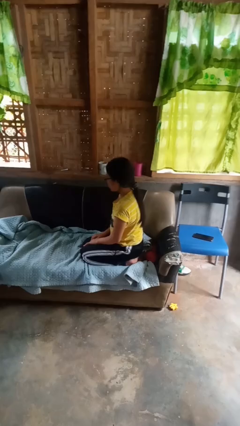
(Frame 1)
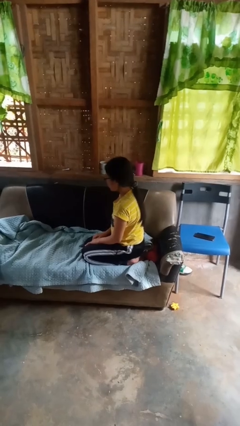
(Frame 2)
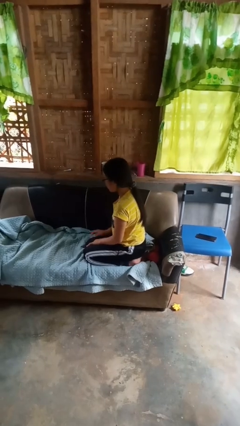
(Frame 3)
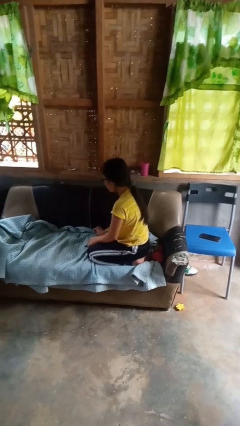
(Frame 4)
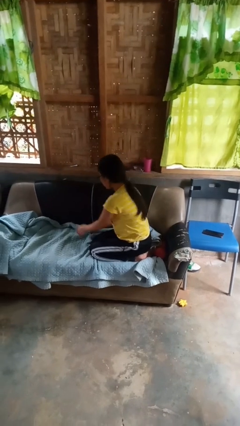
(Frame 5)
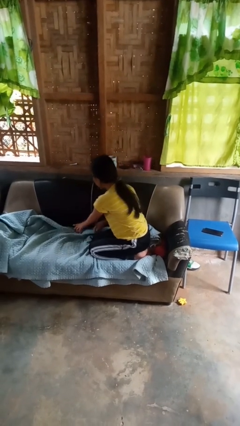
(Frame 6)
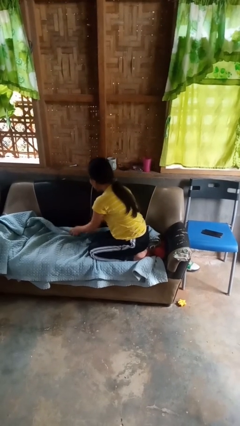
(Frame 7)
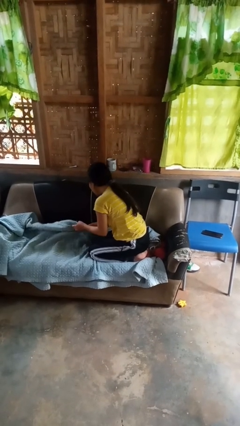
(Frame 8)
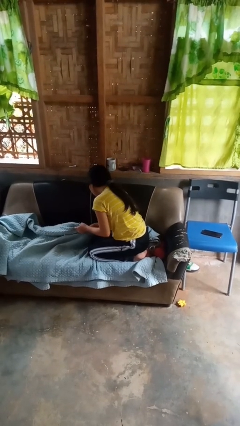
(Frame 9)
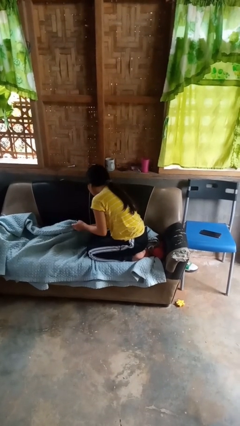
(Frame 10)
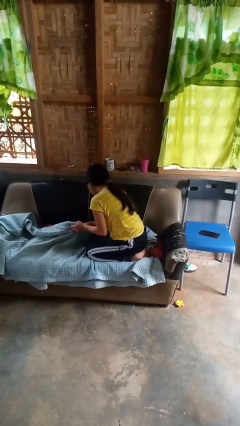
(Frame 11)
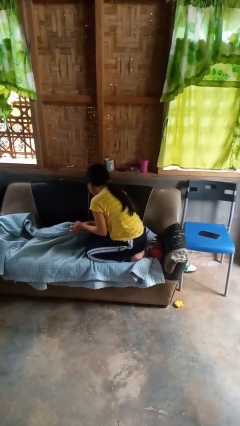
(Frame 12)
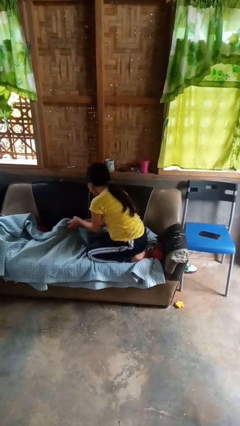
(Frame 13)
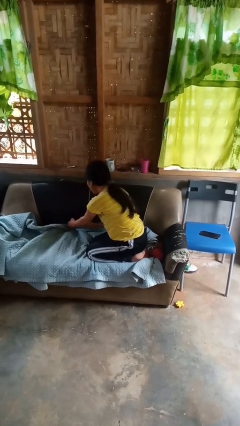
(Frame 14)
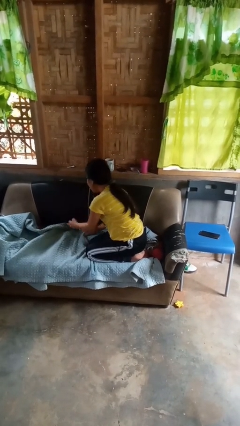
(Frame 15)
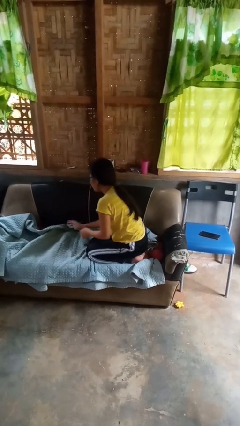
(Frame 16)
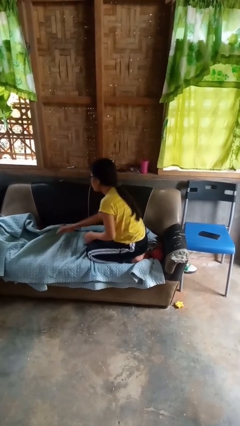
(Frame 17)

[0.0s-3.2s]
person searches in couch

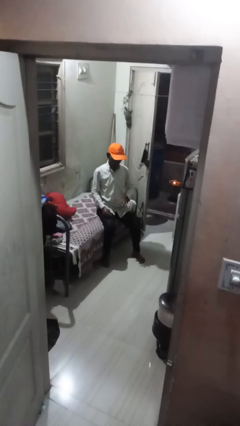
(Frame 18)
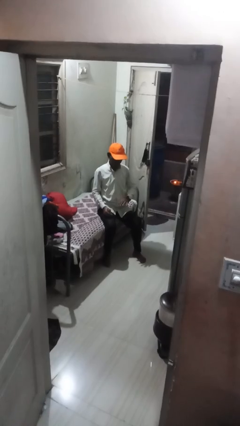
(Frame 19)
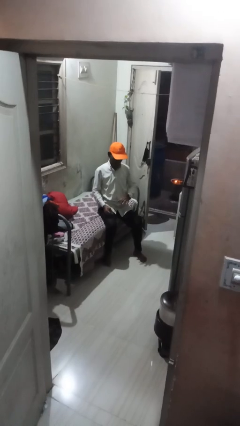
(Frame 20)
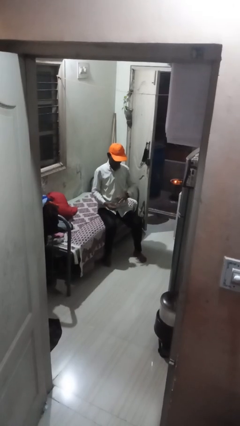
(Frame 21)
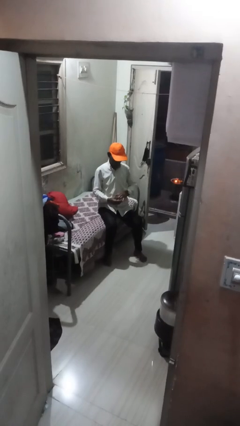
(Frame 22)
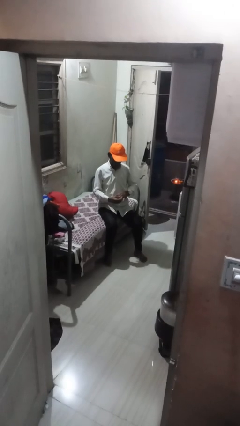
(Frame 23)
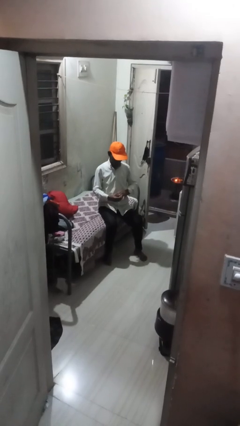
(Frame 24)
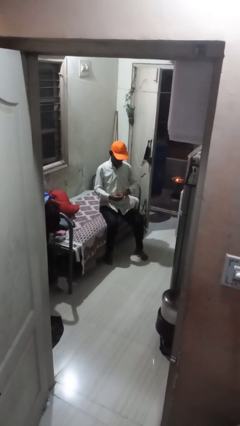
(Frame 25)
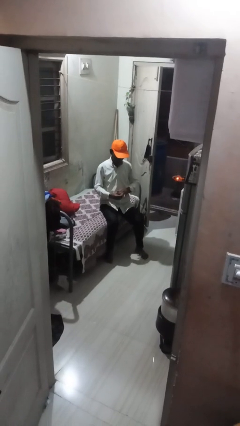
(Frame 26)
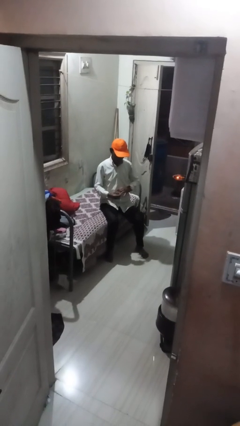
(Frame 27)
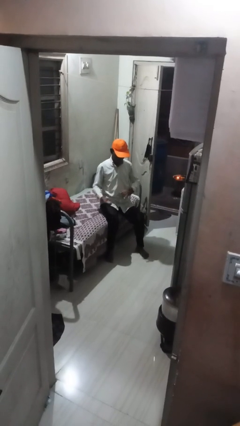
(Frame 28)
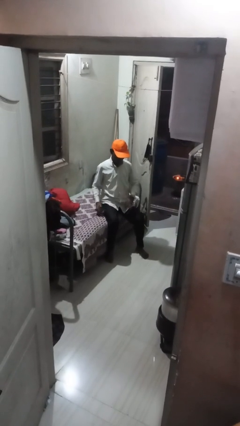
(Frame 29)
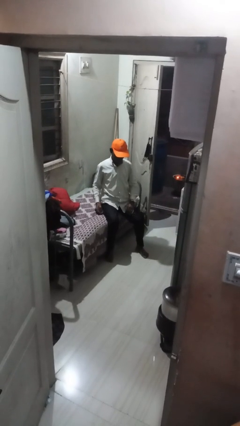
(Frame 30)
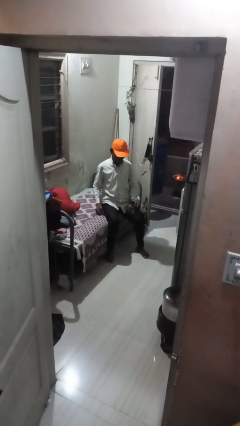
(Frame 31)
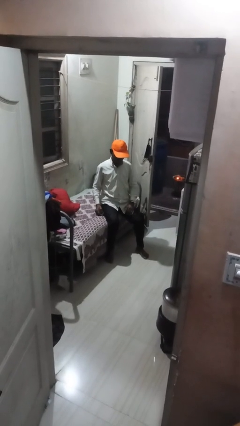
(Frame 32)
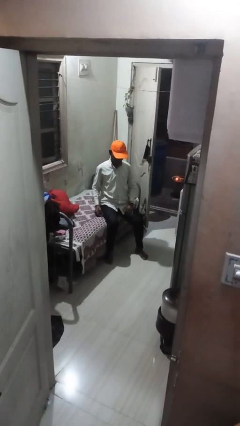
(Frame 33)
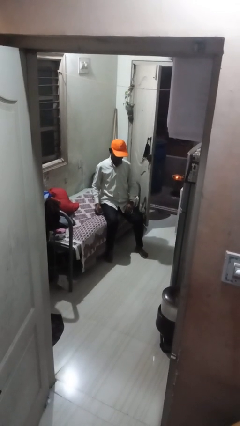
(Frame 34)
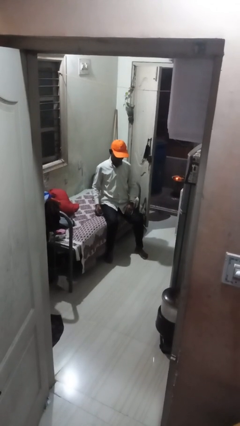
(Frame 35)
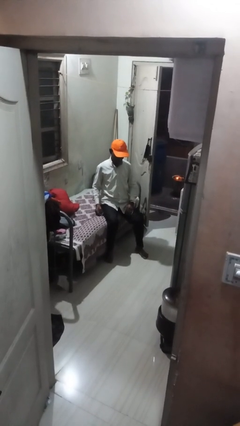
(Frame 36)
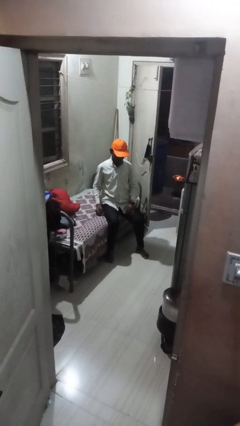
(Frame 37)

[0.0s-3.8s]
person takes off ring

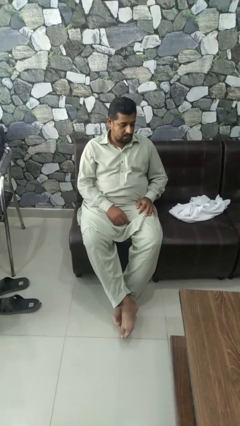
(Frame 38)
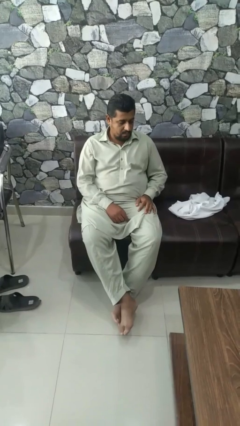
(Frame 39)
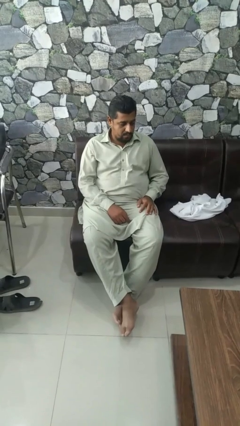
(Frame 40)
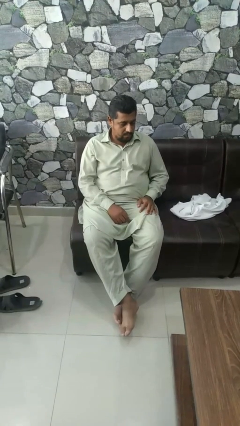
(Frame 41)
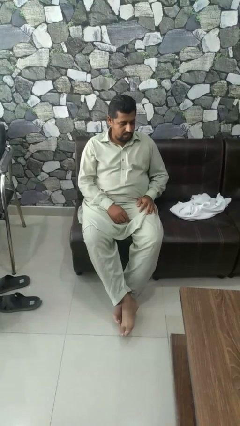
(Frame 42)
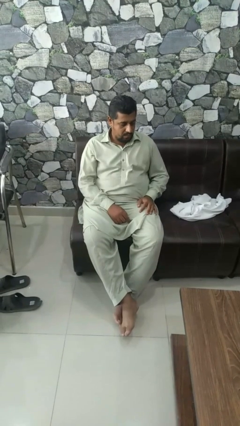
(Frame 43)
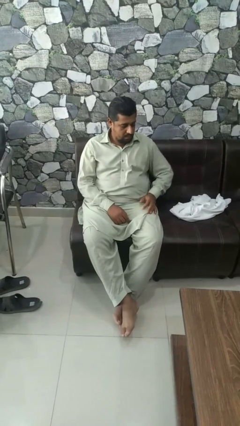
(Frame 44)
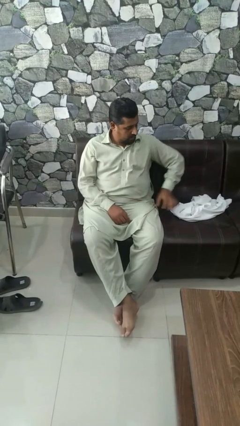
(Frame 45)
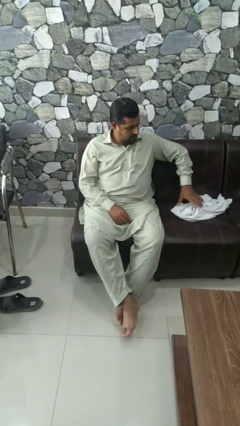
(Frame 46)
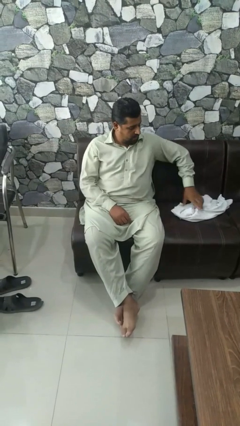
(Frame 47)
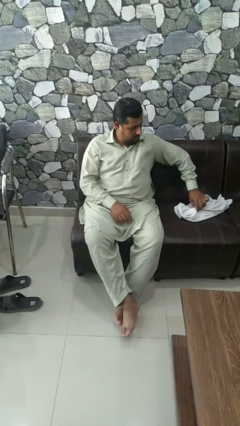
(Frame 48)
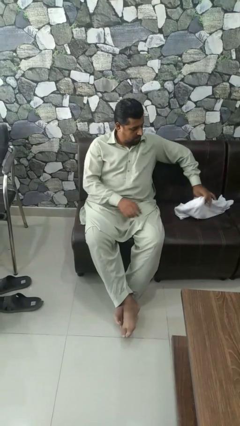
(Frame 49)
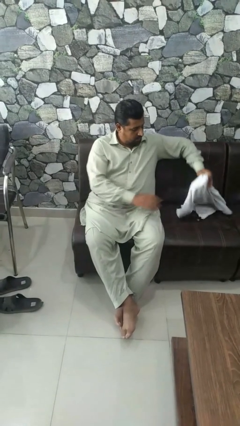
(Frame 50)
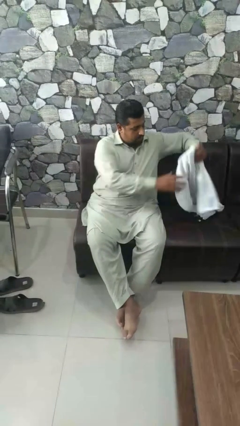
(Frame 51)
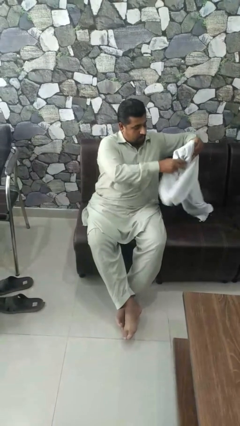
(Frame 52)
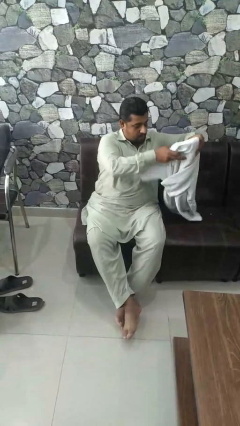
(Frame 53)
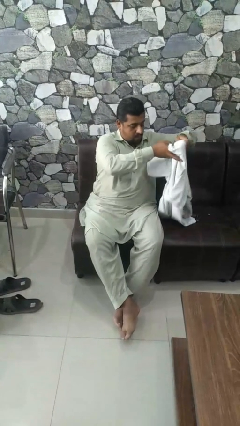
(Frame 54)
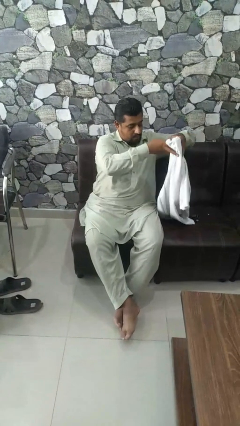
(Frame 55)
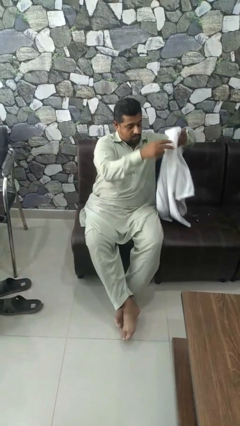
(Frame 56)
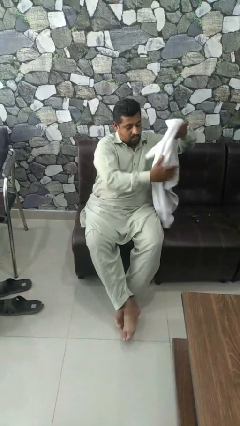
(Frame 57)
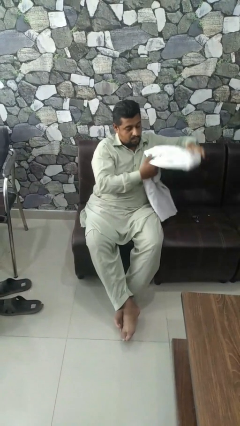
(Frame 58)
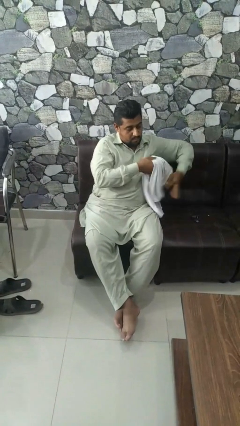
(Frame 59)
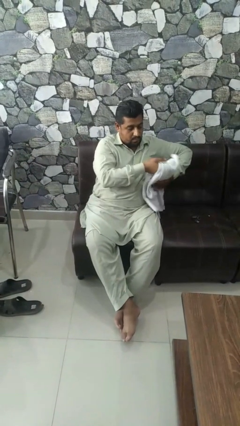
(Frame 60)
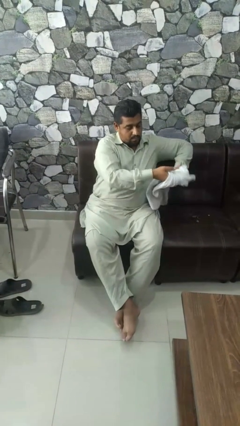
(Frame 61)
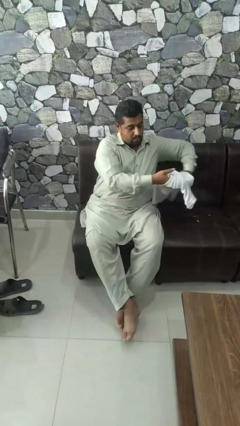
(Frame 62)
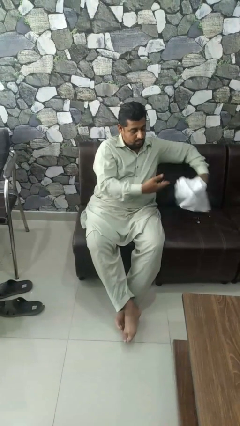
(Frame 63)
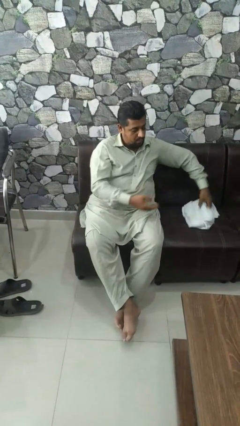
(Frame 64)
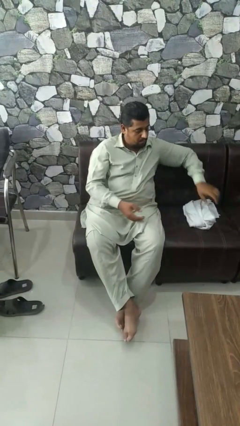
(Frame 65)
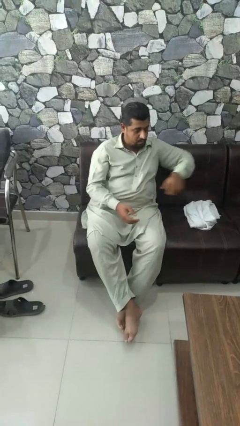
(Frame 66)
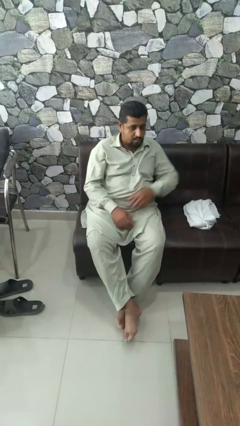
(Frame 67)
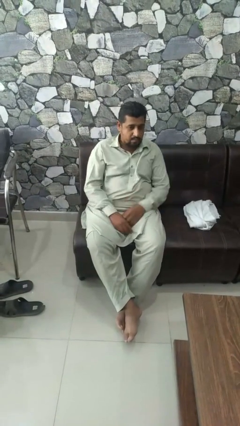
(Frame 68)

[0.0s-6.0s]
person folds shirt

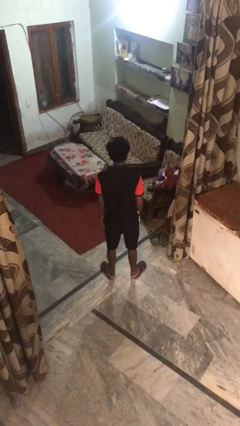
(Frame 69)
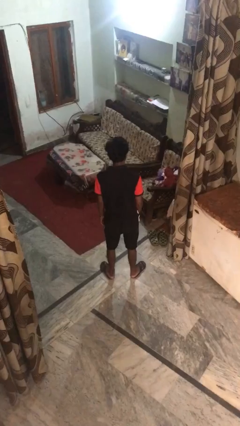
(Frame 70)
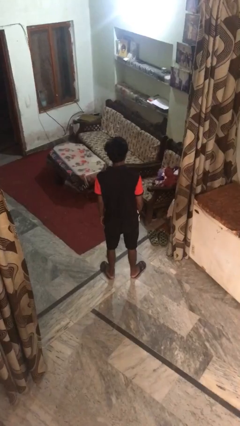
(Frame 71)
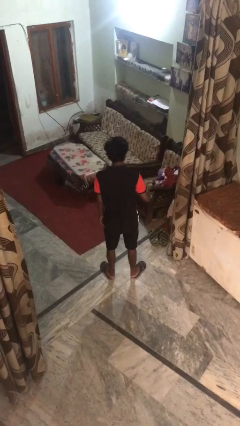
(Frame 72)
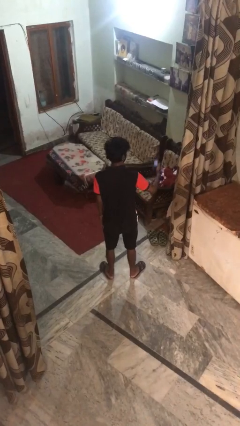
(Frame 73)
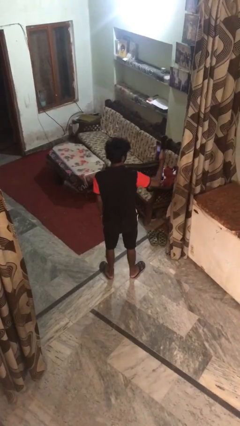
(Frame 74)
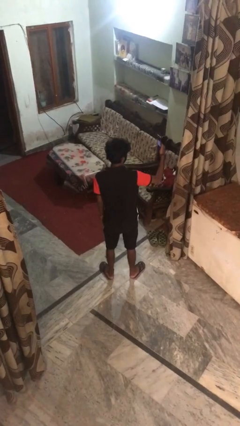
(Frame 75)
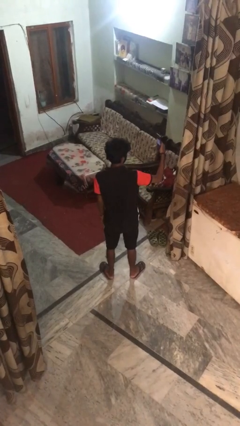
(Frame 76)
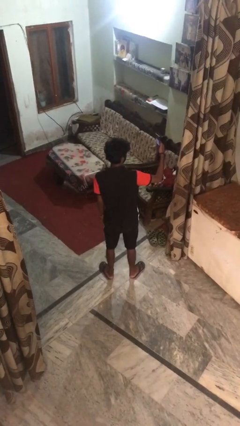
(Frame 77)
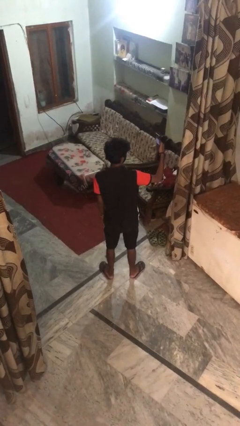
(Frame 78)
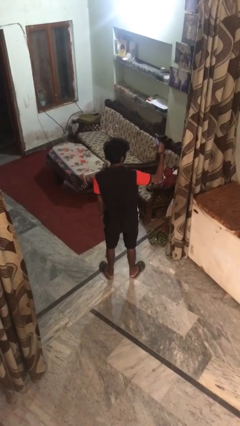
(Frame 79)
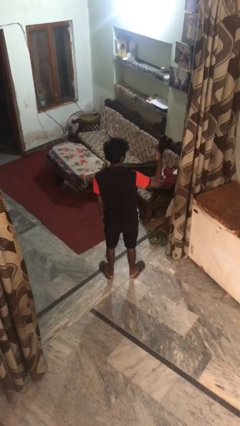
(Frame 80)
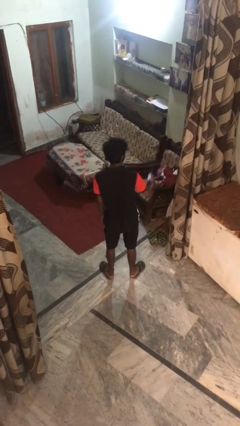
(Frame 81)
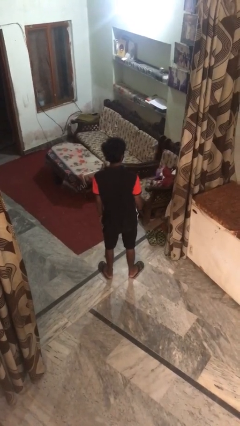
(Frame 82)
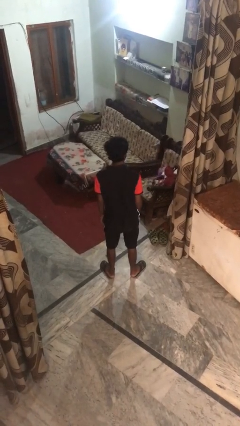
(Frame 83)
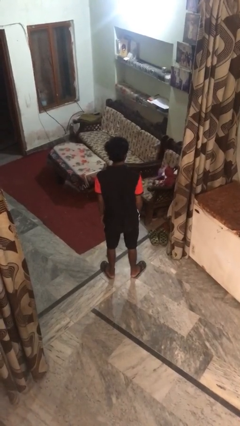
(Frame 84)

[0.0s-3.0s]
person takes selfie

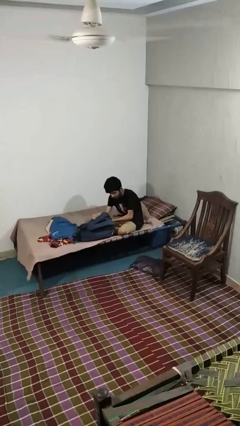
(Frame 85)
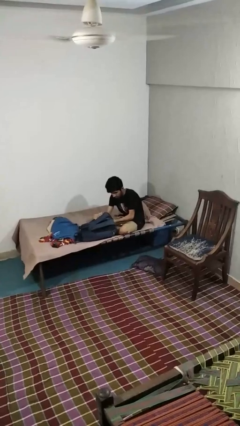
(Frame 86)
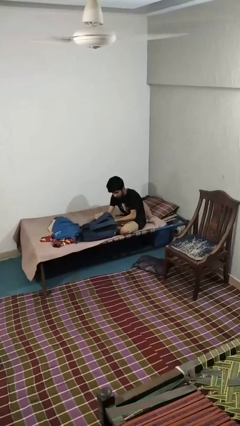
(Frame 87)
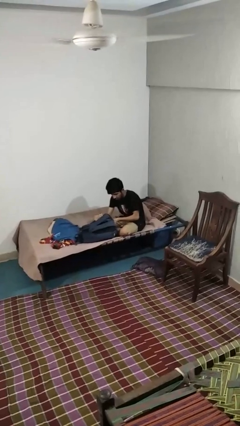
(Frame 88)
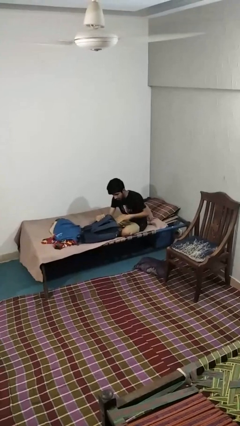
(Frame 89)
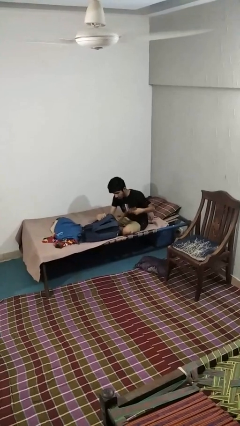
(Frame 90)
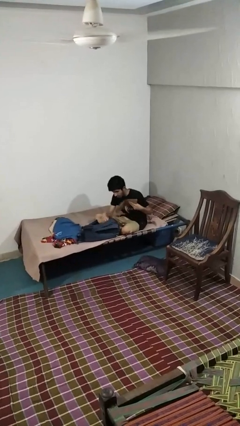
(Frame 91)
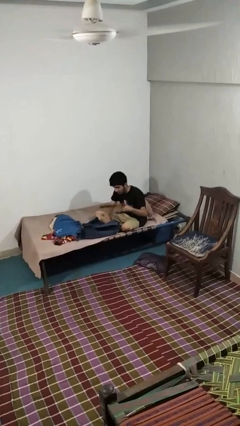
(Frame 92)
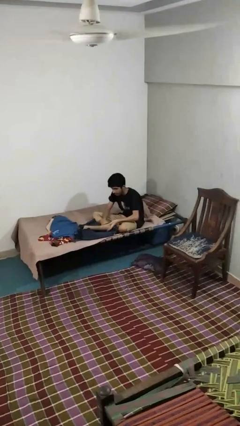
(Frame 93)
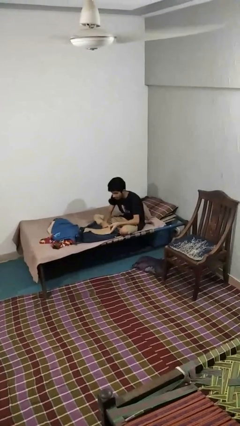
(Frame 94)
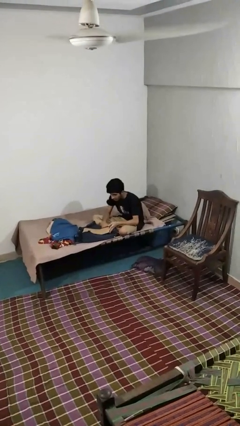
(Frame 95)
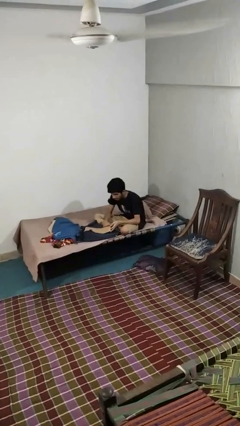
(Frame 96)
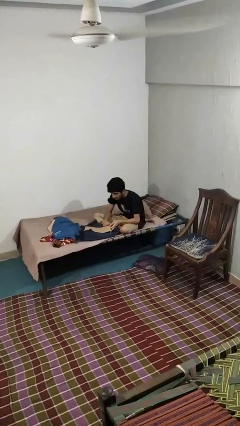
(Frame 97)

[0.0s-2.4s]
person takes object from backpack
